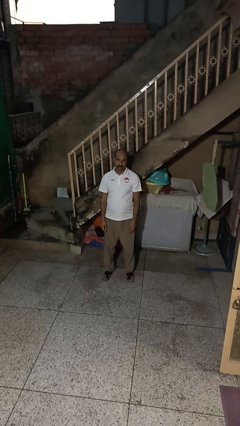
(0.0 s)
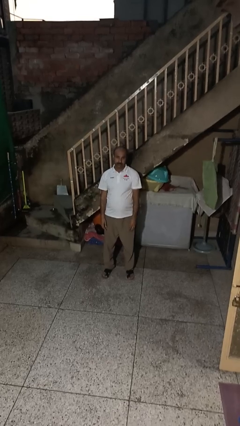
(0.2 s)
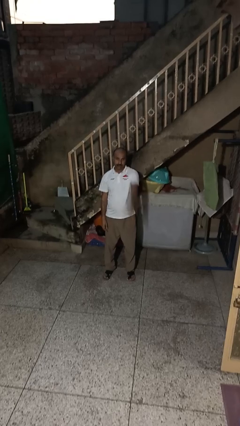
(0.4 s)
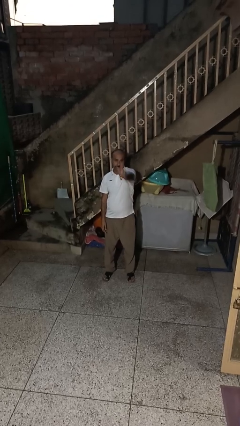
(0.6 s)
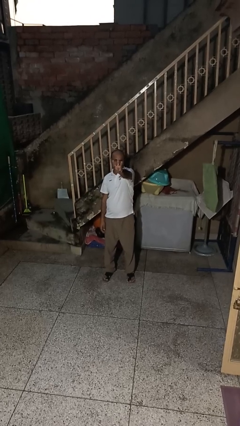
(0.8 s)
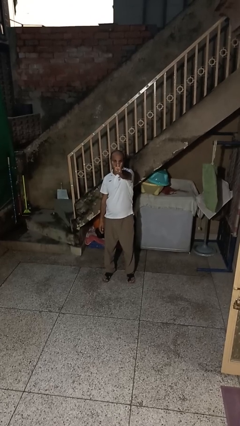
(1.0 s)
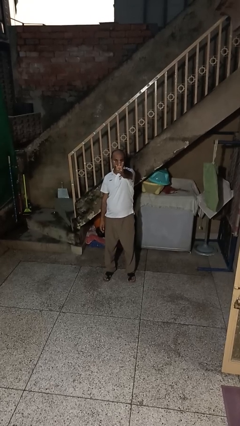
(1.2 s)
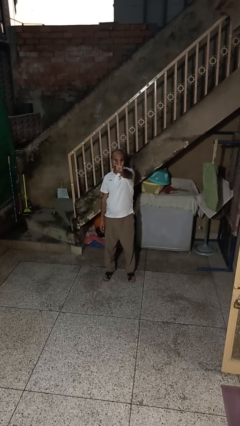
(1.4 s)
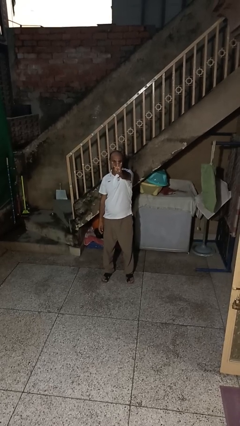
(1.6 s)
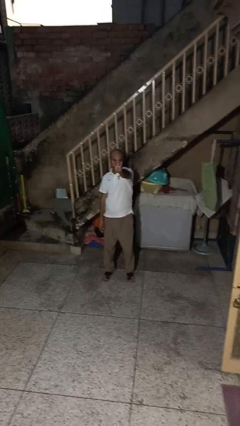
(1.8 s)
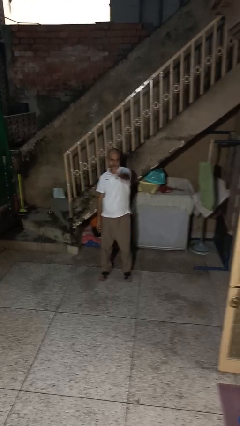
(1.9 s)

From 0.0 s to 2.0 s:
person gestures number three

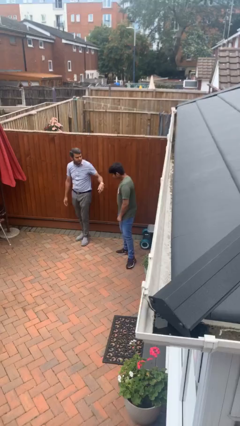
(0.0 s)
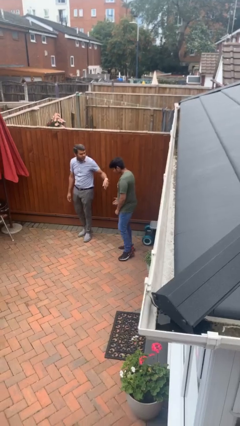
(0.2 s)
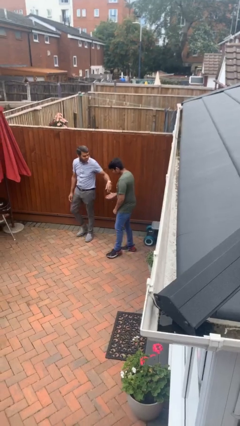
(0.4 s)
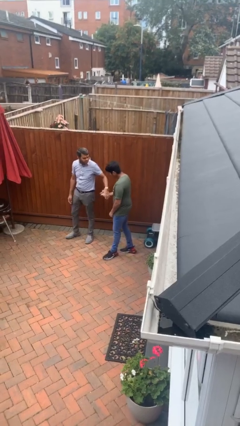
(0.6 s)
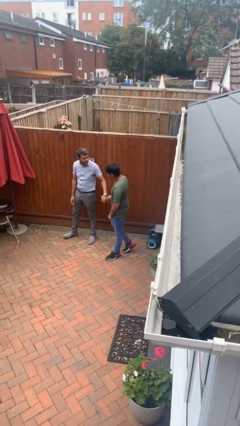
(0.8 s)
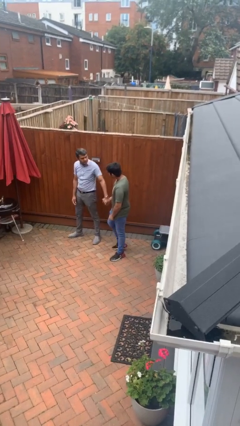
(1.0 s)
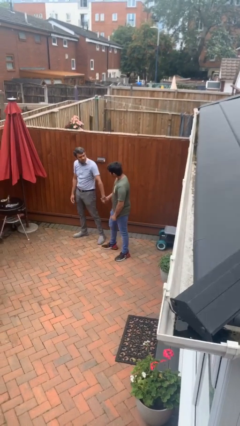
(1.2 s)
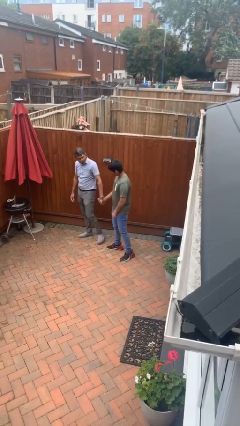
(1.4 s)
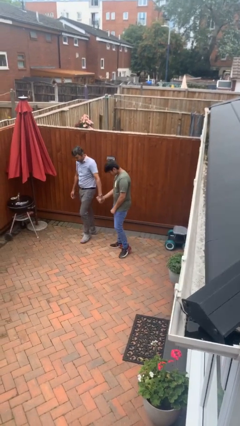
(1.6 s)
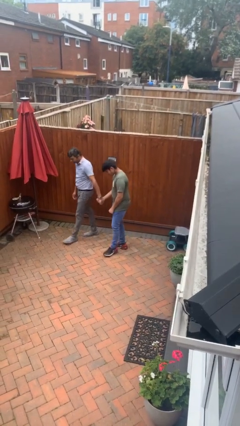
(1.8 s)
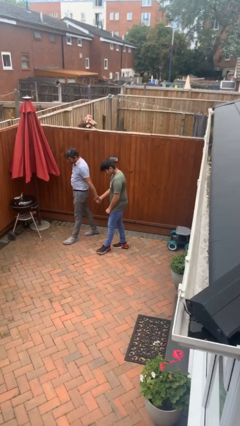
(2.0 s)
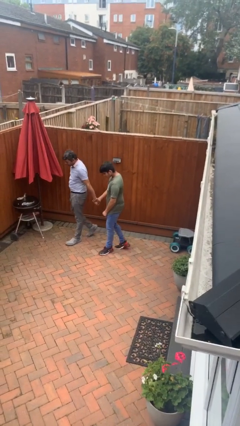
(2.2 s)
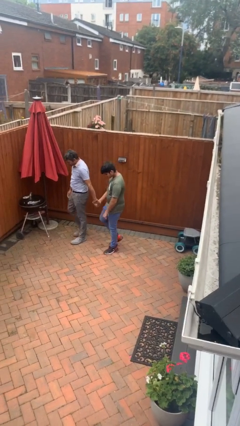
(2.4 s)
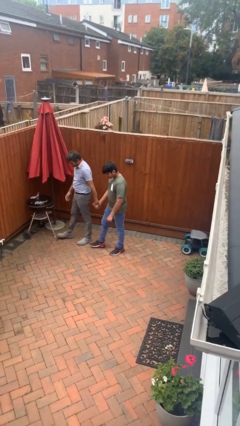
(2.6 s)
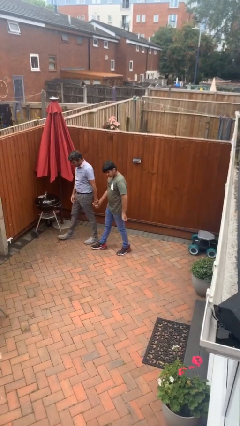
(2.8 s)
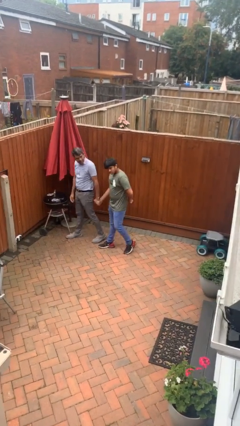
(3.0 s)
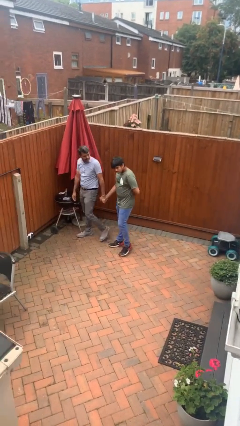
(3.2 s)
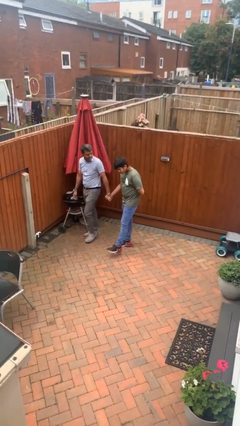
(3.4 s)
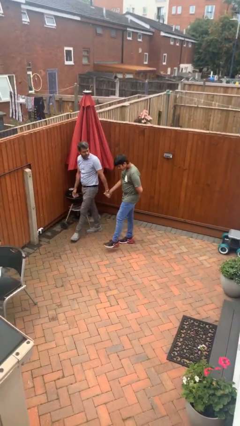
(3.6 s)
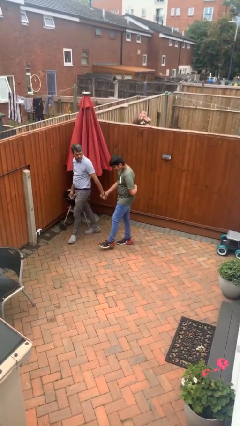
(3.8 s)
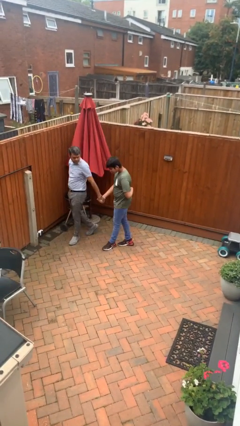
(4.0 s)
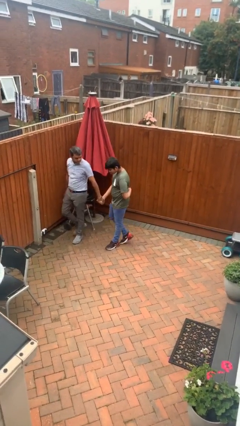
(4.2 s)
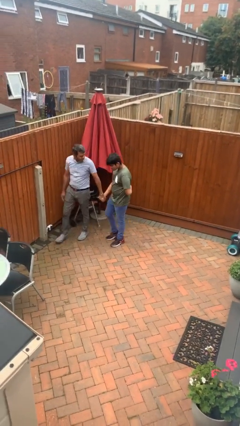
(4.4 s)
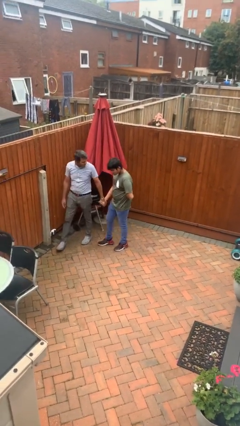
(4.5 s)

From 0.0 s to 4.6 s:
person holds hand

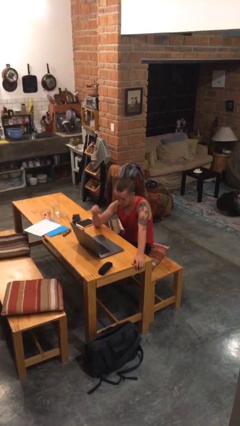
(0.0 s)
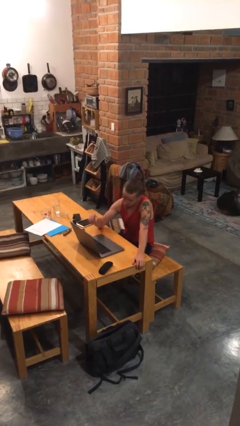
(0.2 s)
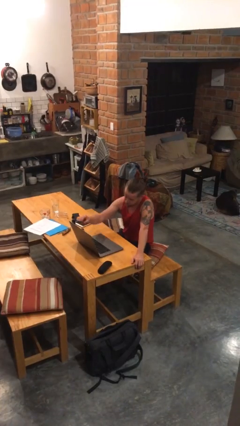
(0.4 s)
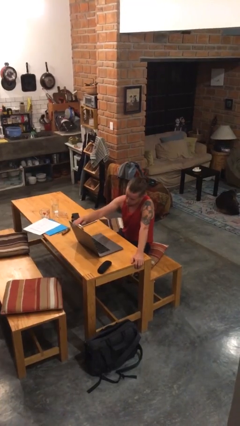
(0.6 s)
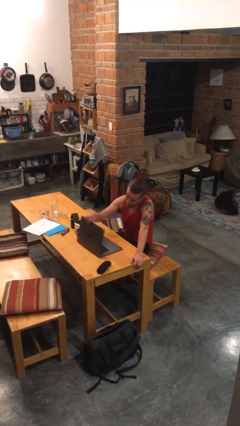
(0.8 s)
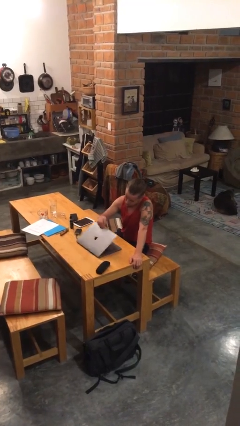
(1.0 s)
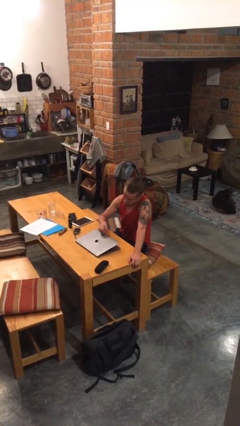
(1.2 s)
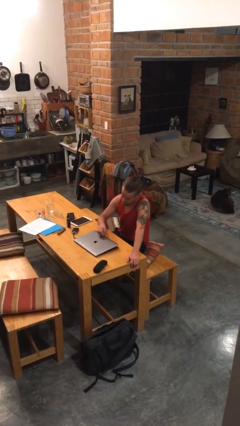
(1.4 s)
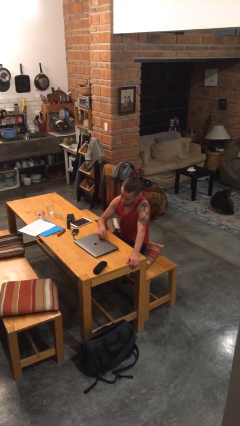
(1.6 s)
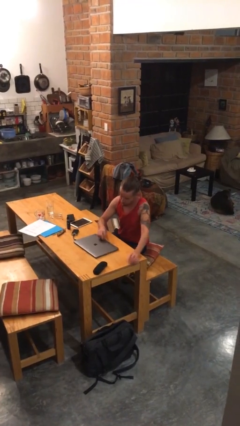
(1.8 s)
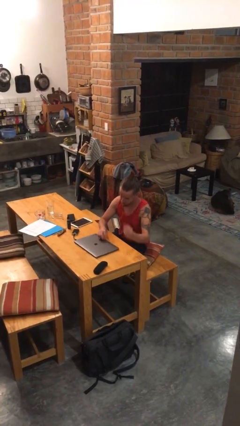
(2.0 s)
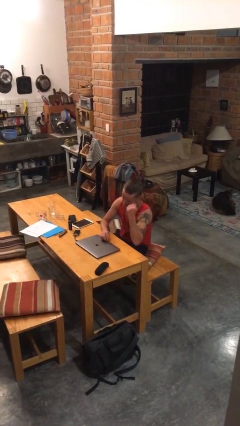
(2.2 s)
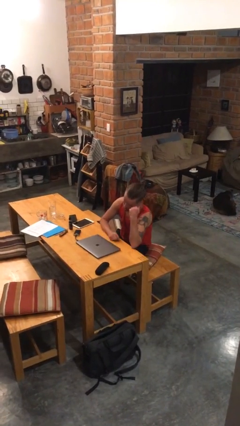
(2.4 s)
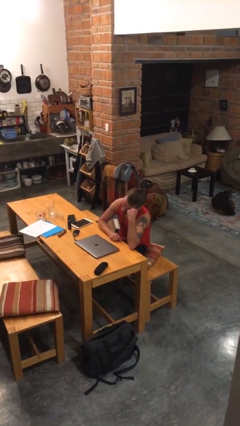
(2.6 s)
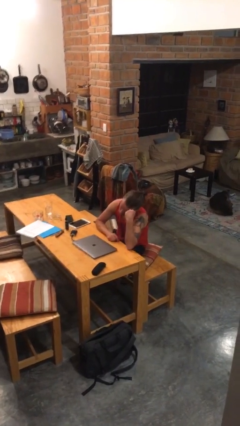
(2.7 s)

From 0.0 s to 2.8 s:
person closes laptop

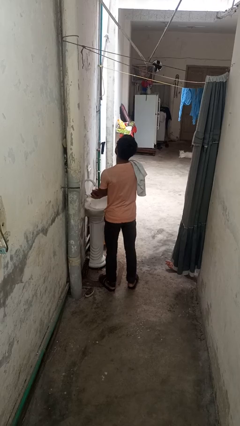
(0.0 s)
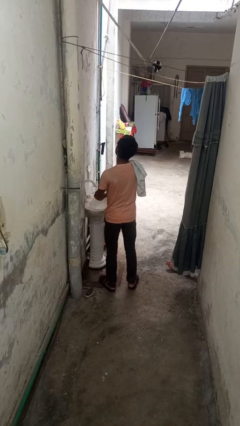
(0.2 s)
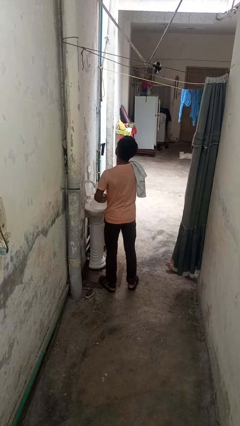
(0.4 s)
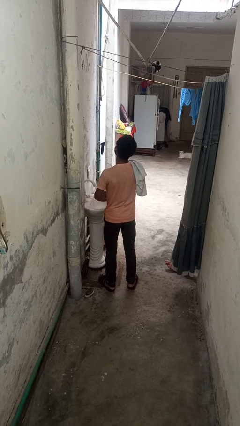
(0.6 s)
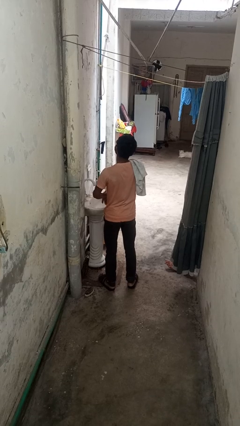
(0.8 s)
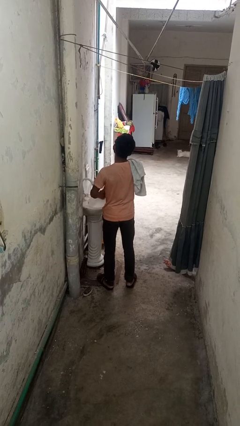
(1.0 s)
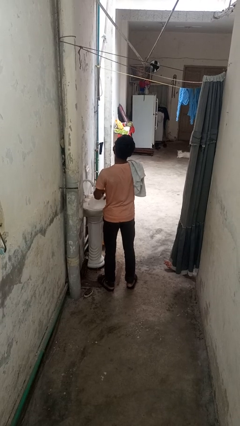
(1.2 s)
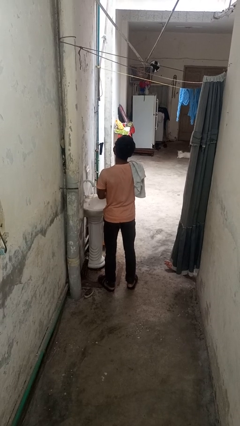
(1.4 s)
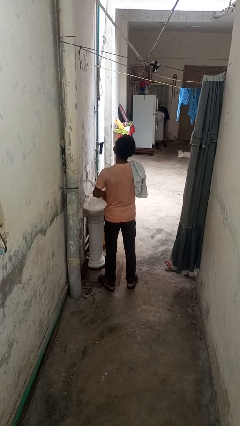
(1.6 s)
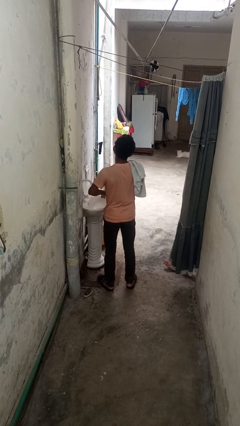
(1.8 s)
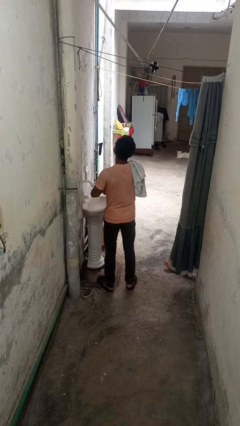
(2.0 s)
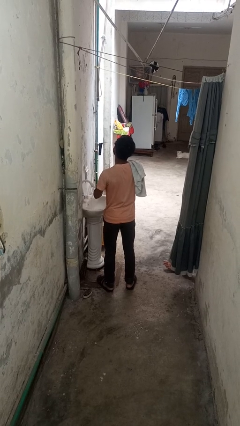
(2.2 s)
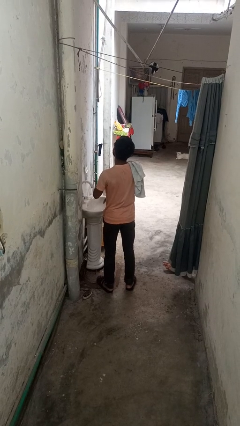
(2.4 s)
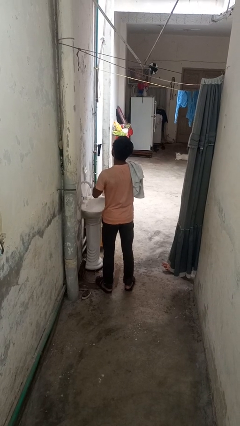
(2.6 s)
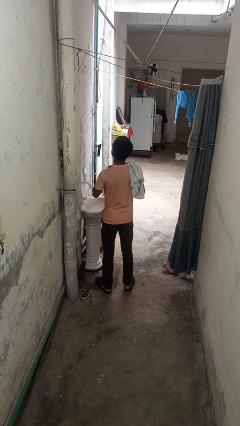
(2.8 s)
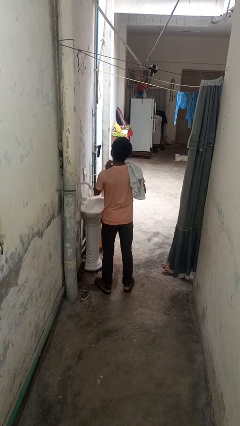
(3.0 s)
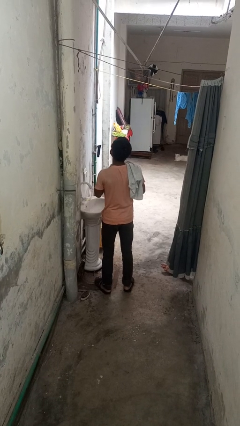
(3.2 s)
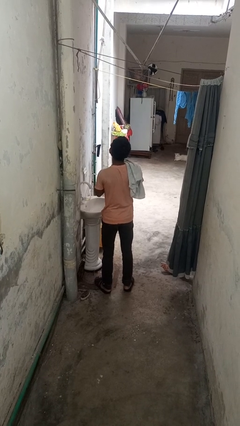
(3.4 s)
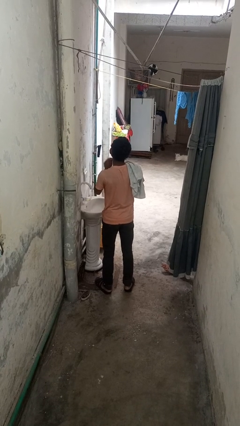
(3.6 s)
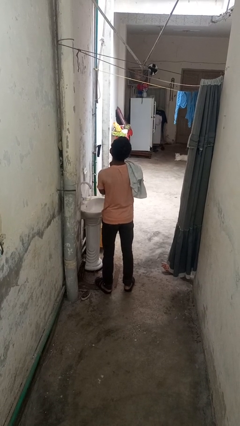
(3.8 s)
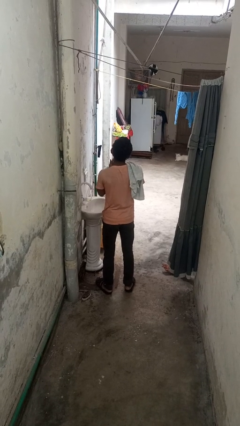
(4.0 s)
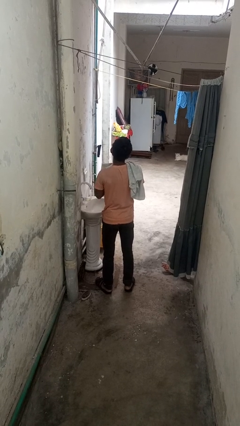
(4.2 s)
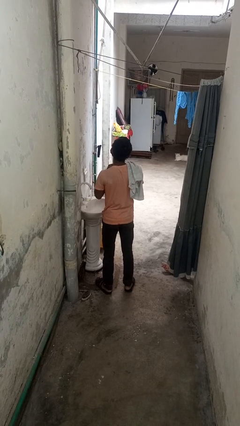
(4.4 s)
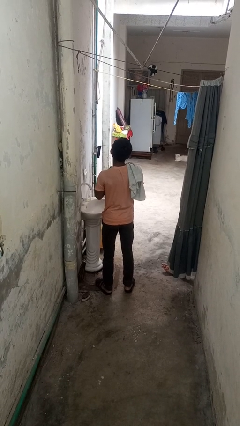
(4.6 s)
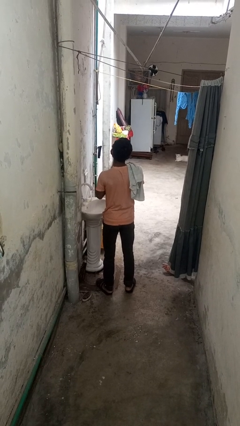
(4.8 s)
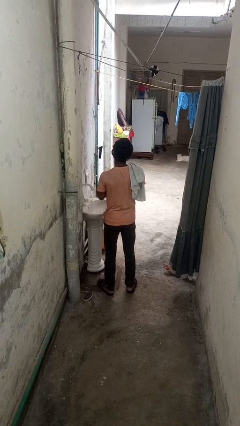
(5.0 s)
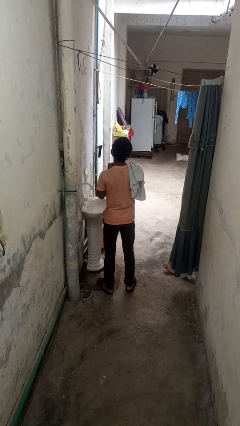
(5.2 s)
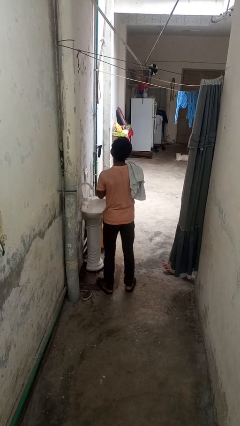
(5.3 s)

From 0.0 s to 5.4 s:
person dries hands with towel

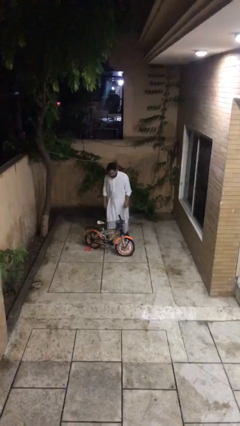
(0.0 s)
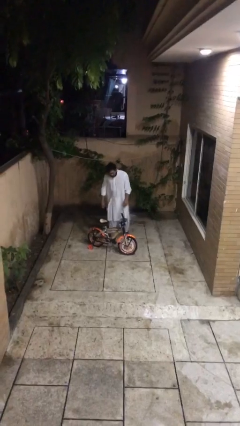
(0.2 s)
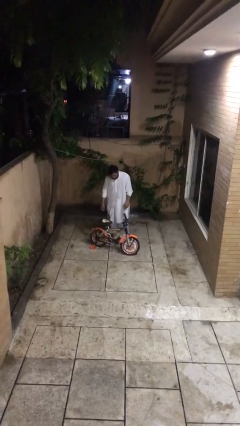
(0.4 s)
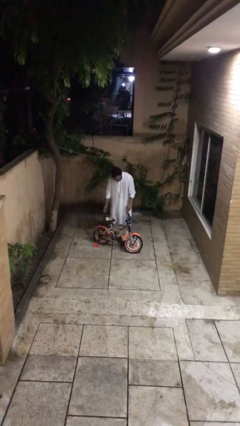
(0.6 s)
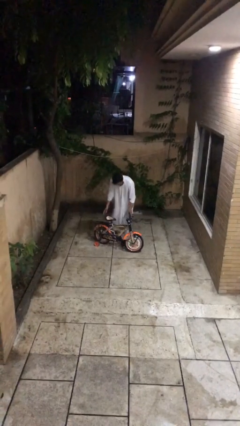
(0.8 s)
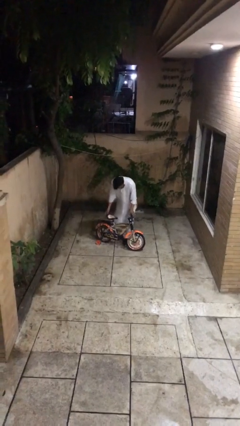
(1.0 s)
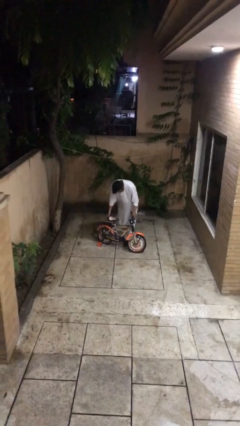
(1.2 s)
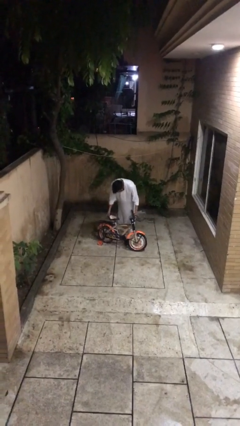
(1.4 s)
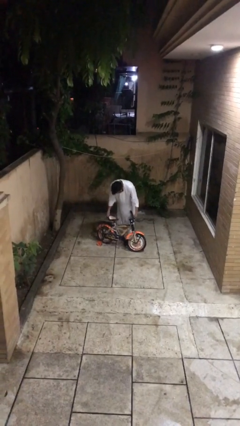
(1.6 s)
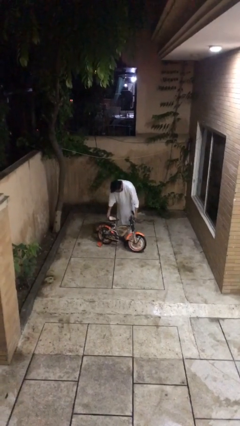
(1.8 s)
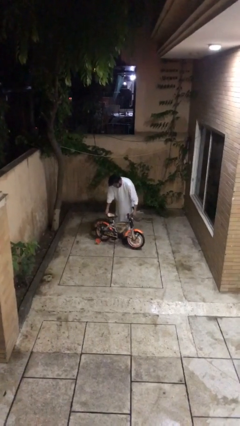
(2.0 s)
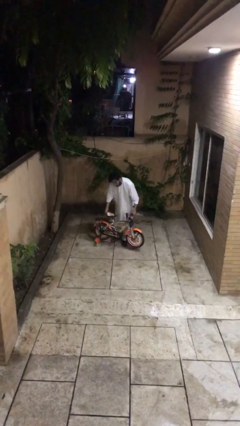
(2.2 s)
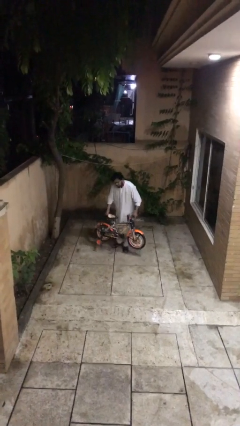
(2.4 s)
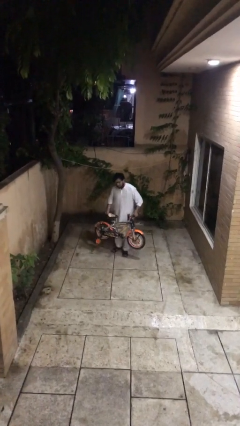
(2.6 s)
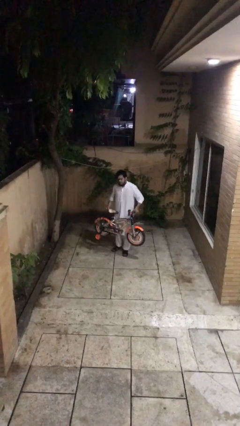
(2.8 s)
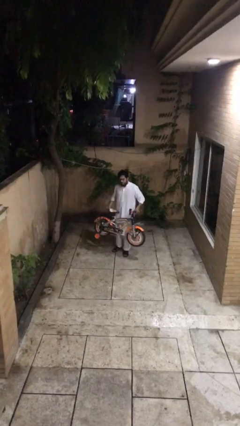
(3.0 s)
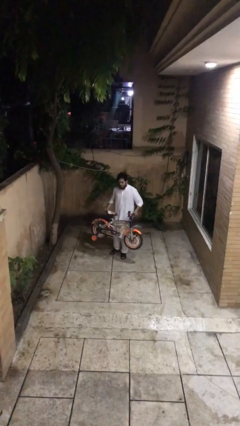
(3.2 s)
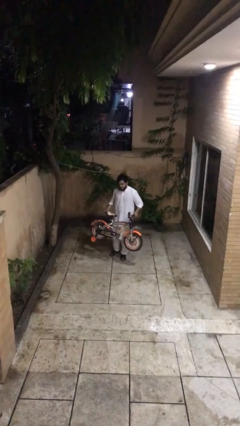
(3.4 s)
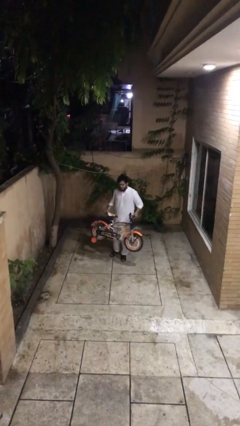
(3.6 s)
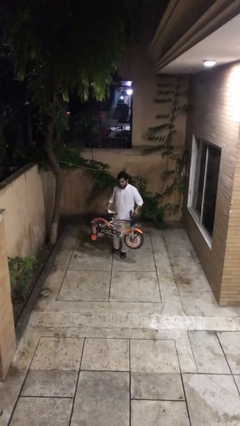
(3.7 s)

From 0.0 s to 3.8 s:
person picks up object from floor
